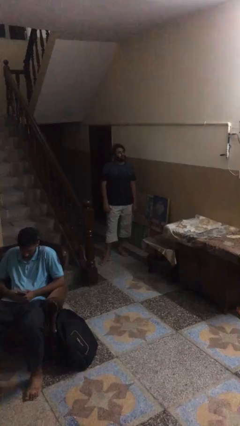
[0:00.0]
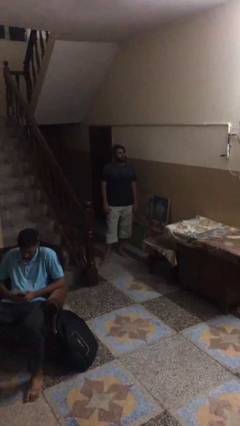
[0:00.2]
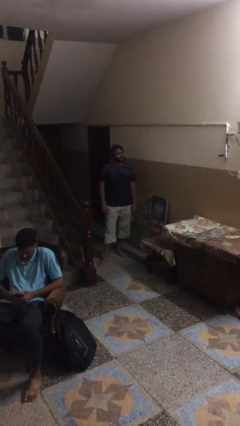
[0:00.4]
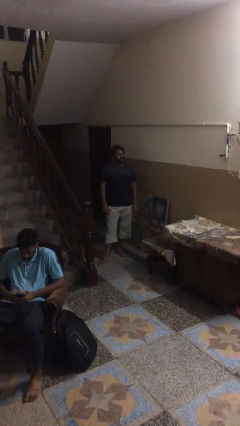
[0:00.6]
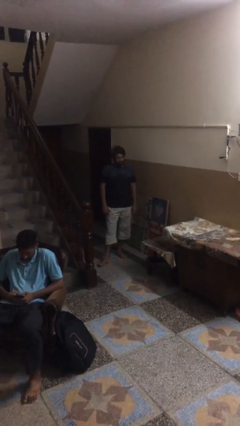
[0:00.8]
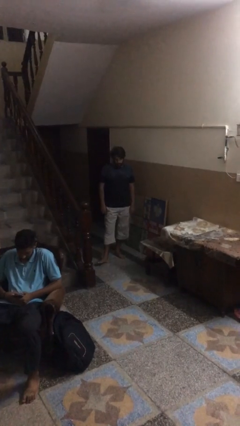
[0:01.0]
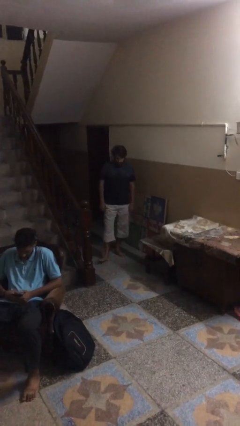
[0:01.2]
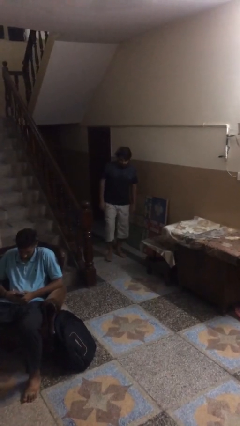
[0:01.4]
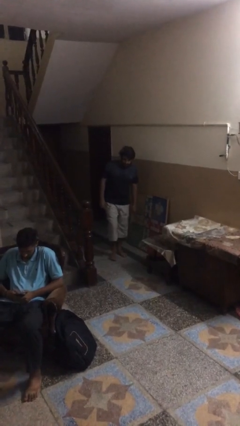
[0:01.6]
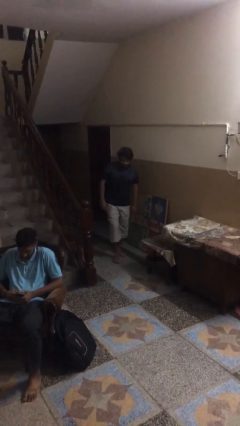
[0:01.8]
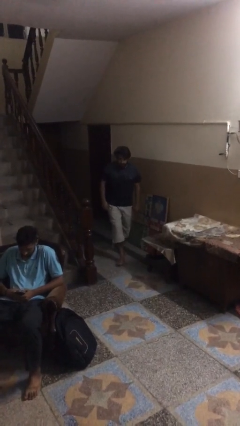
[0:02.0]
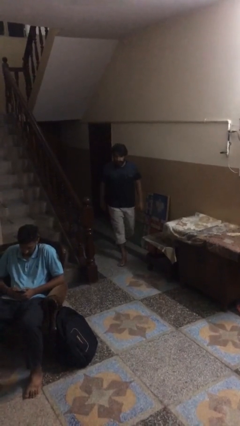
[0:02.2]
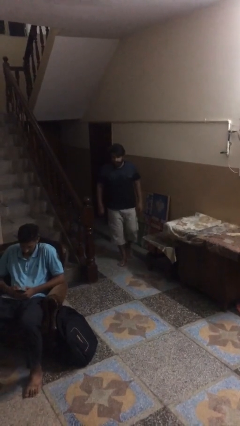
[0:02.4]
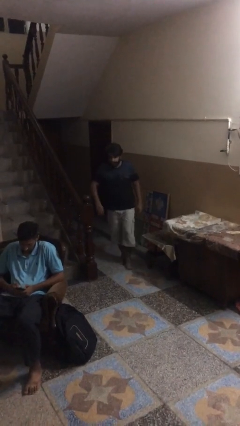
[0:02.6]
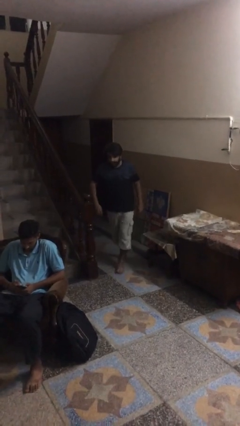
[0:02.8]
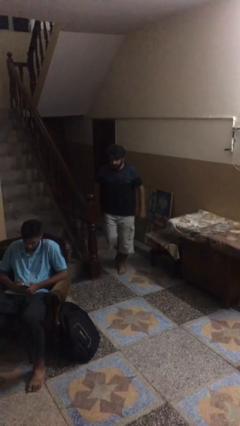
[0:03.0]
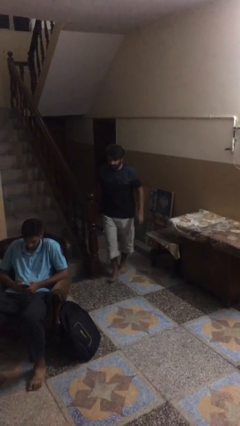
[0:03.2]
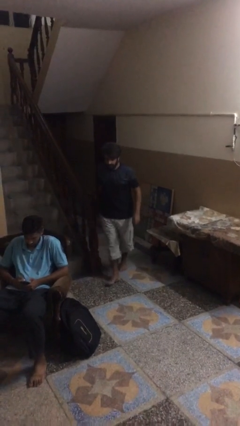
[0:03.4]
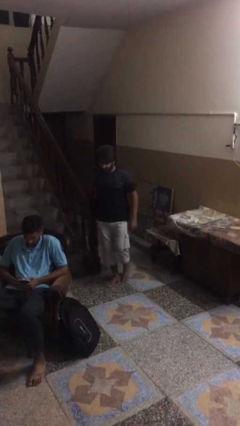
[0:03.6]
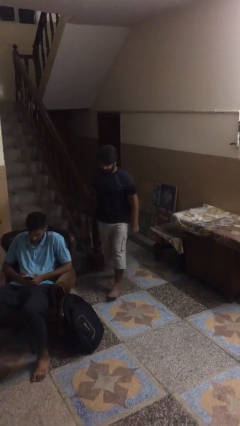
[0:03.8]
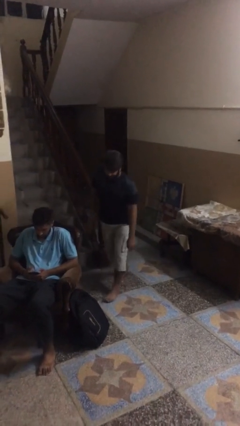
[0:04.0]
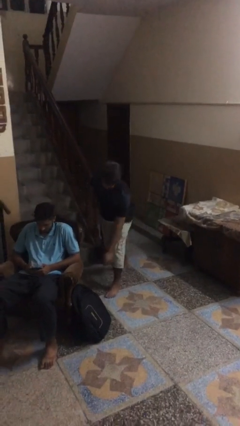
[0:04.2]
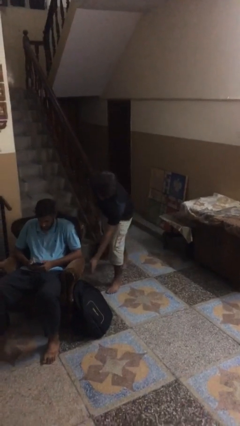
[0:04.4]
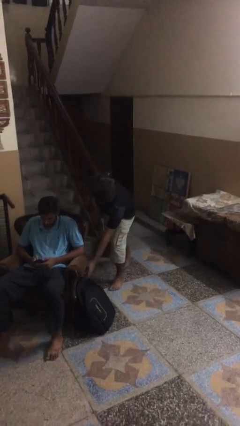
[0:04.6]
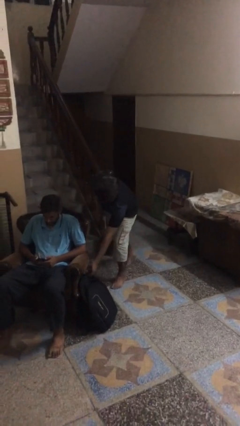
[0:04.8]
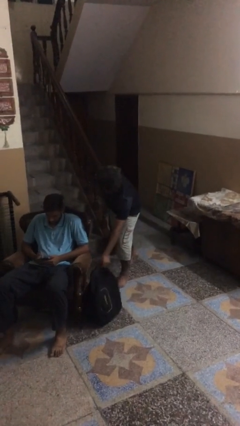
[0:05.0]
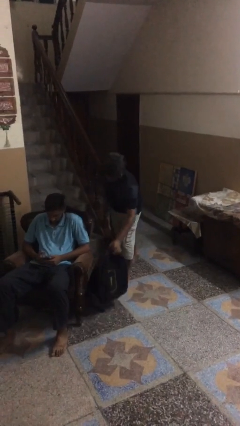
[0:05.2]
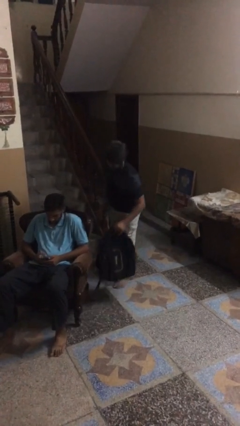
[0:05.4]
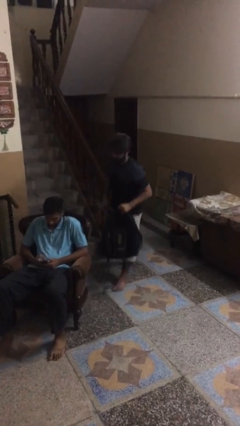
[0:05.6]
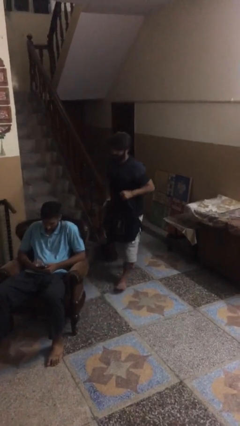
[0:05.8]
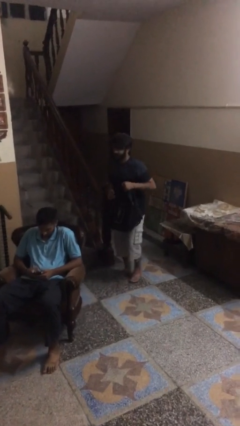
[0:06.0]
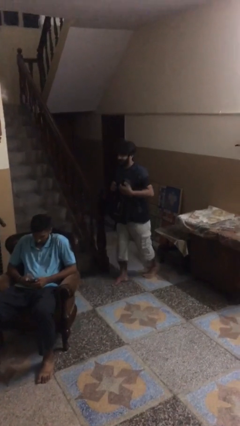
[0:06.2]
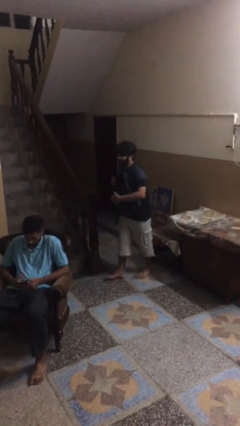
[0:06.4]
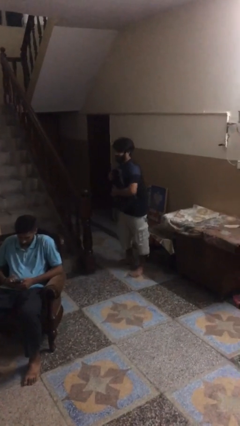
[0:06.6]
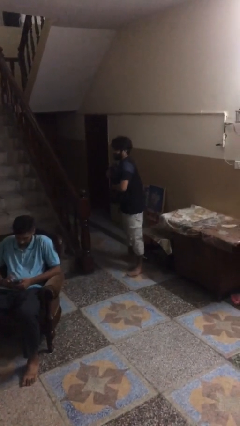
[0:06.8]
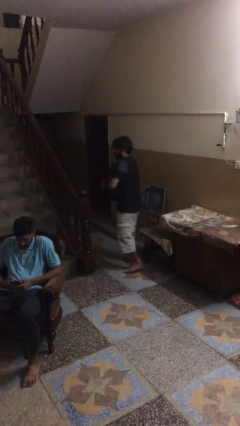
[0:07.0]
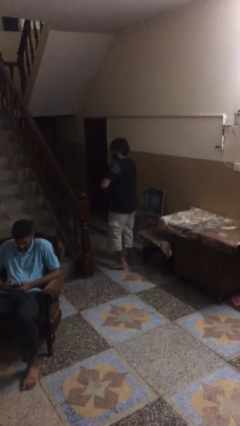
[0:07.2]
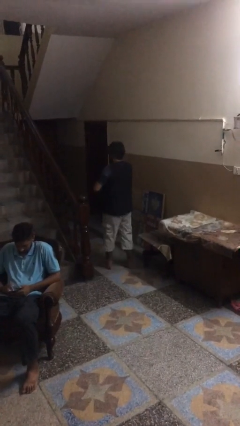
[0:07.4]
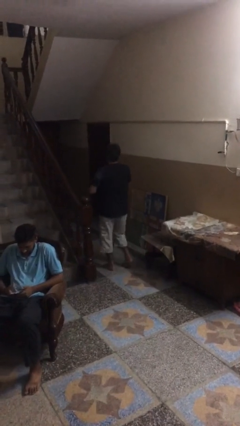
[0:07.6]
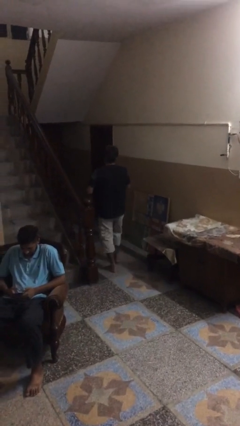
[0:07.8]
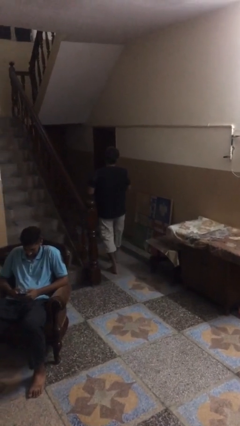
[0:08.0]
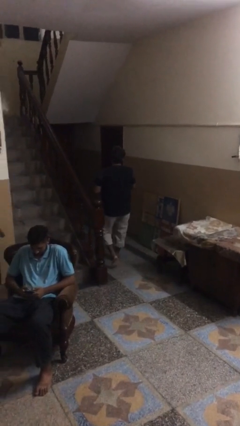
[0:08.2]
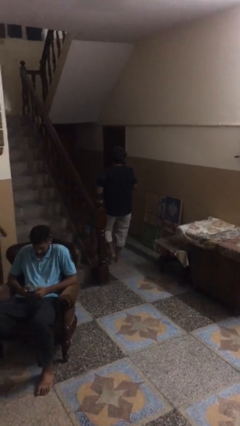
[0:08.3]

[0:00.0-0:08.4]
person steals object from person

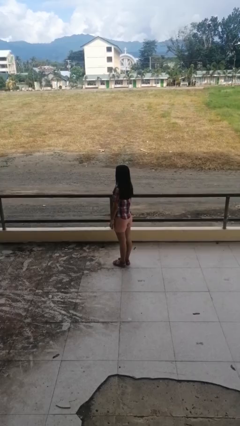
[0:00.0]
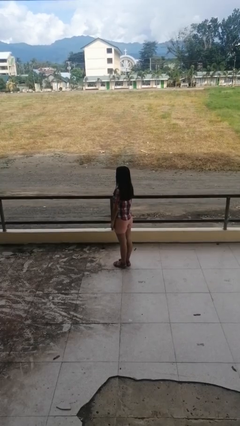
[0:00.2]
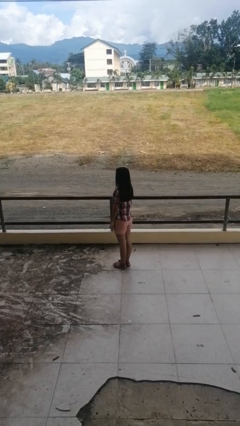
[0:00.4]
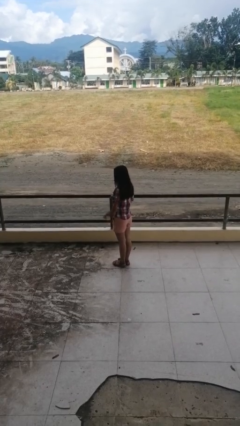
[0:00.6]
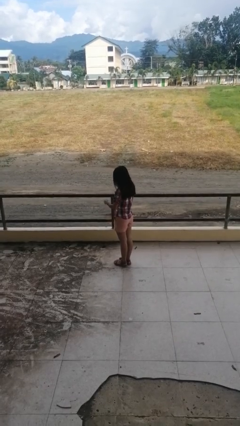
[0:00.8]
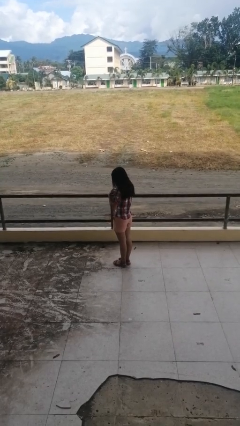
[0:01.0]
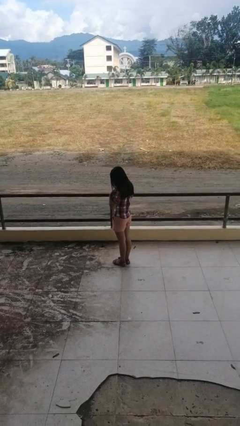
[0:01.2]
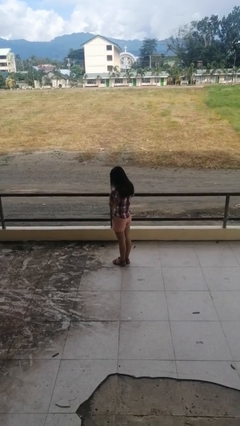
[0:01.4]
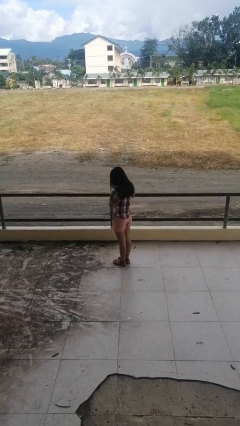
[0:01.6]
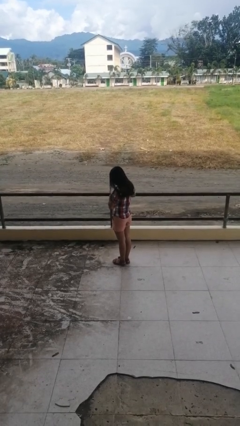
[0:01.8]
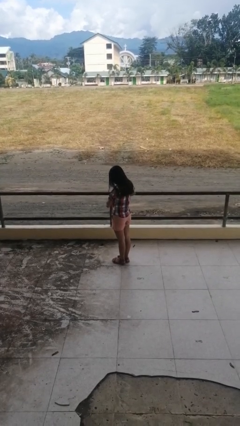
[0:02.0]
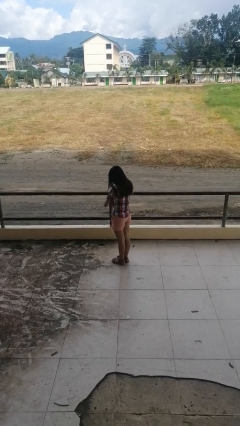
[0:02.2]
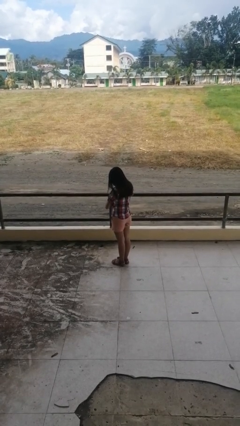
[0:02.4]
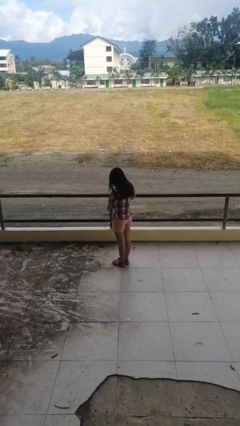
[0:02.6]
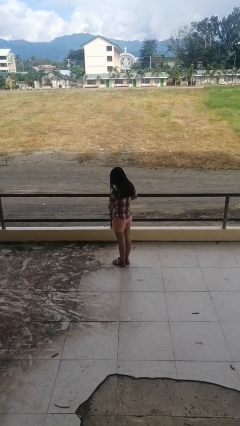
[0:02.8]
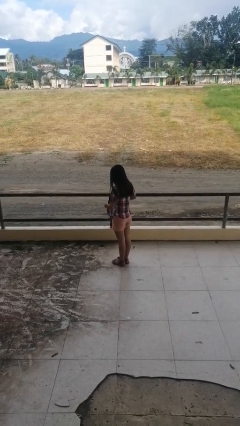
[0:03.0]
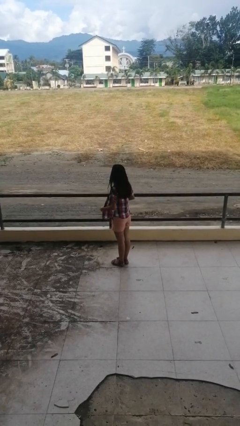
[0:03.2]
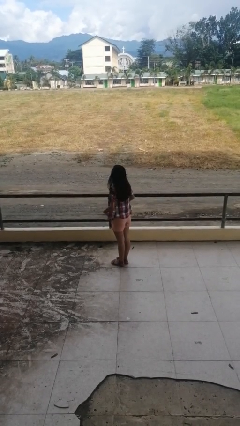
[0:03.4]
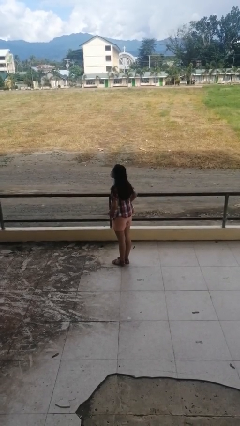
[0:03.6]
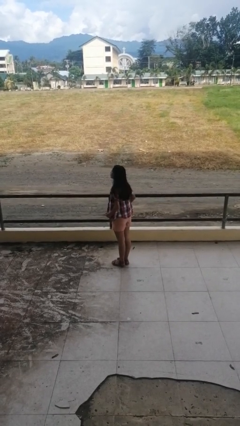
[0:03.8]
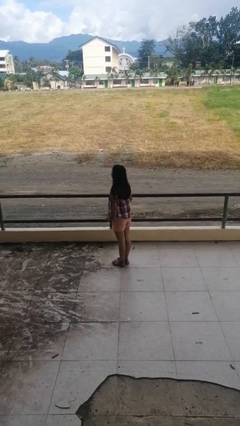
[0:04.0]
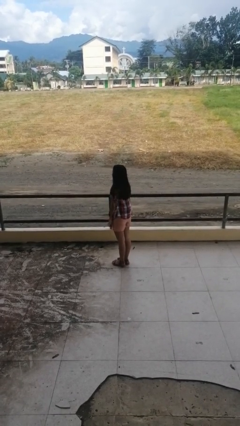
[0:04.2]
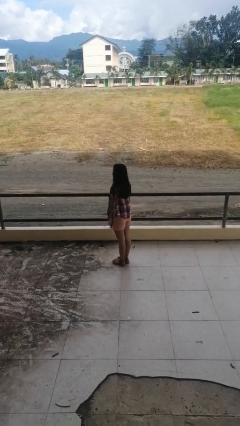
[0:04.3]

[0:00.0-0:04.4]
person unbuttons shirt

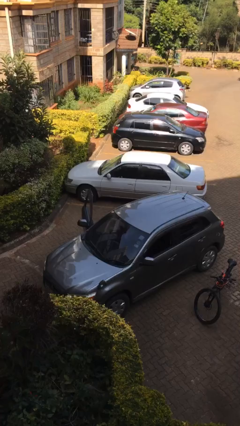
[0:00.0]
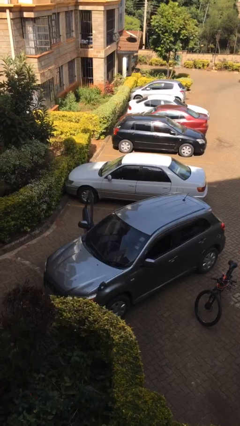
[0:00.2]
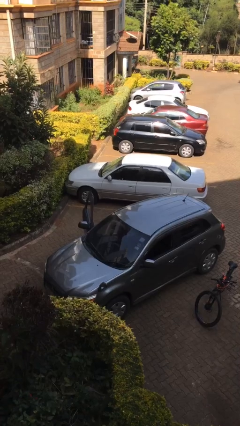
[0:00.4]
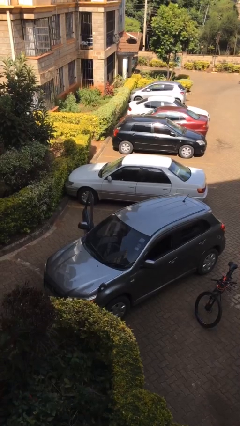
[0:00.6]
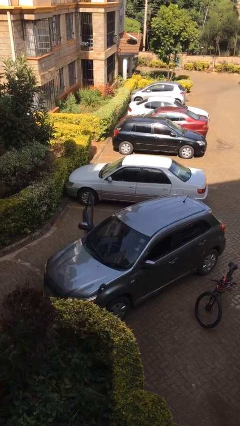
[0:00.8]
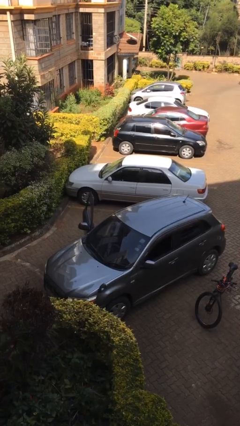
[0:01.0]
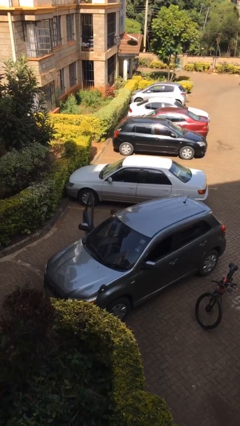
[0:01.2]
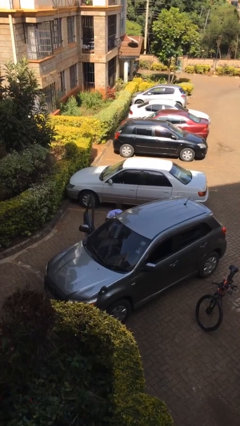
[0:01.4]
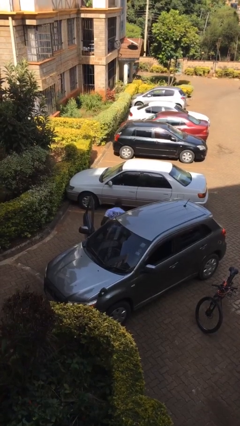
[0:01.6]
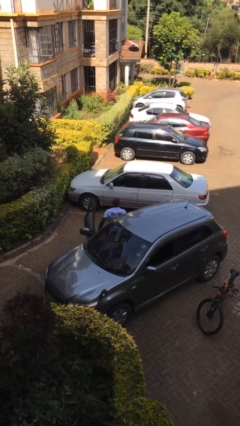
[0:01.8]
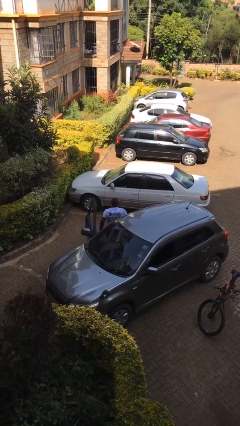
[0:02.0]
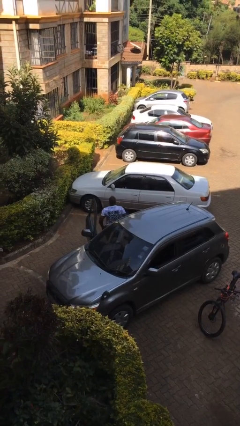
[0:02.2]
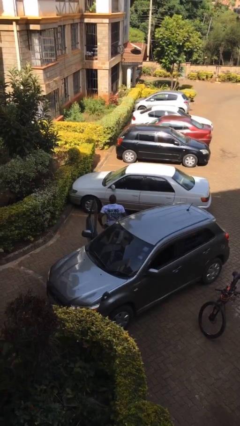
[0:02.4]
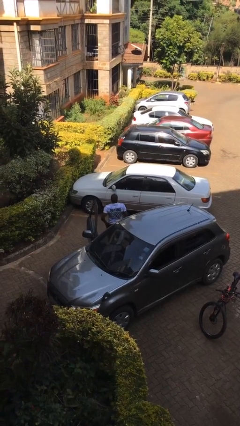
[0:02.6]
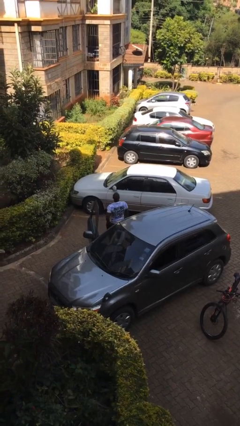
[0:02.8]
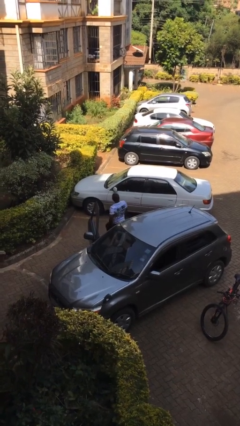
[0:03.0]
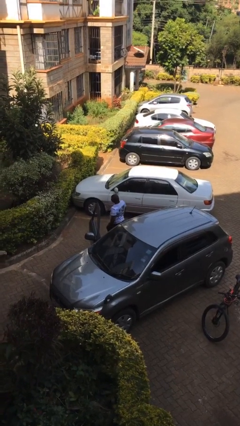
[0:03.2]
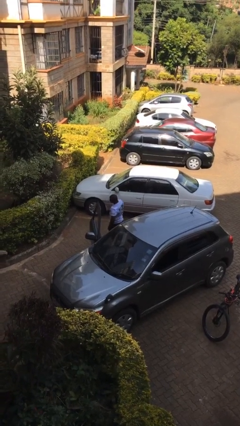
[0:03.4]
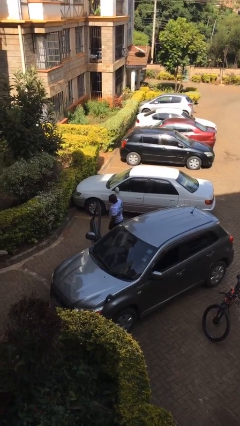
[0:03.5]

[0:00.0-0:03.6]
person exits car

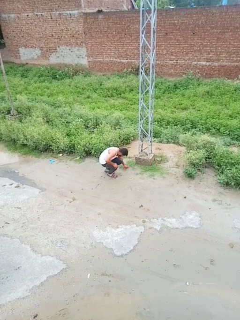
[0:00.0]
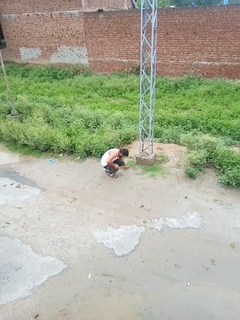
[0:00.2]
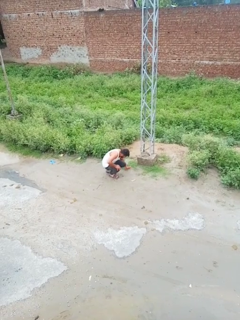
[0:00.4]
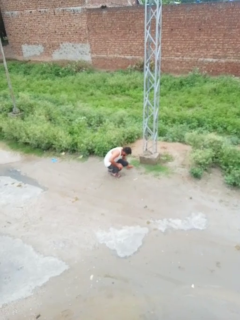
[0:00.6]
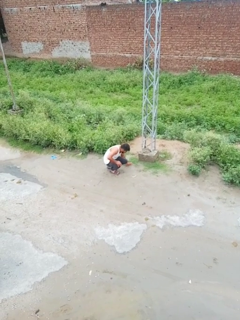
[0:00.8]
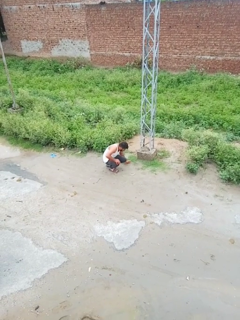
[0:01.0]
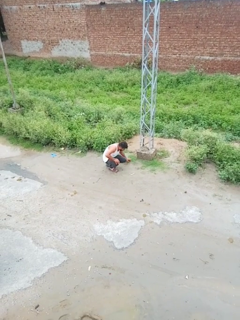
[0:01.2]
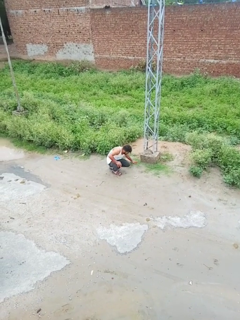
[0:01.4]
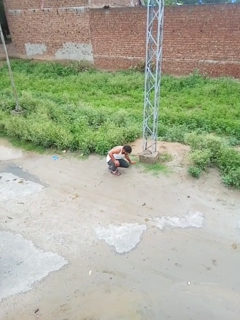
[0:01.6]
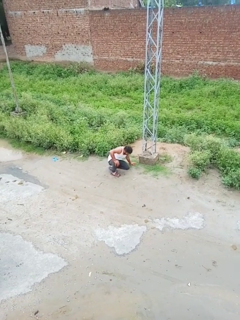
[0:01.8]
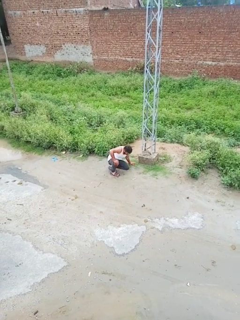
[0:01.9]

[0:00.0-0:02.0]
person lies down on floor
